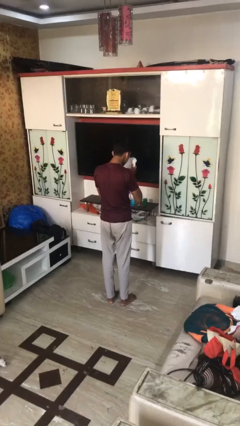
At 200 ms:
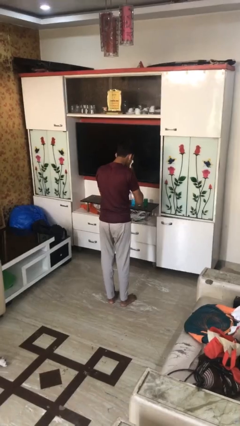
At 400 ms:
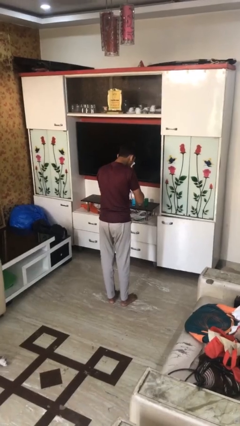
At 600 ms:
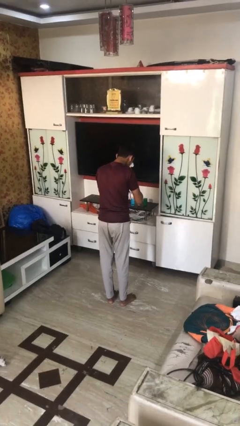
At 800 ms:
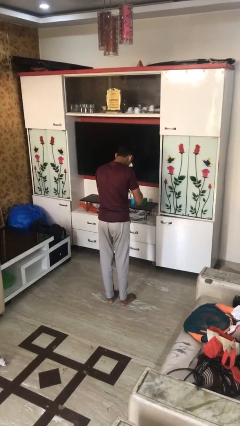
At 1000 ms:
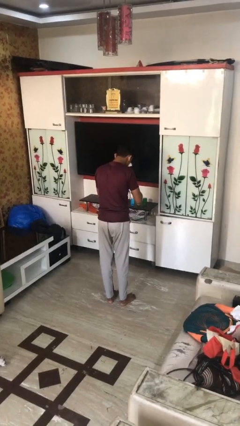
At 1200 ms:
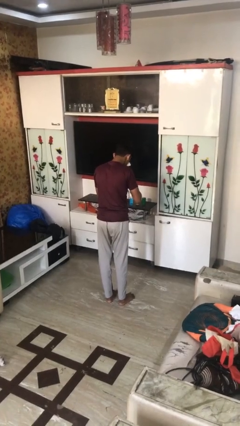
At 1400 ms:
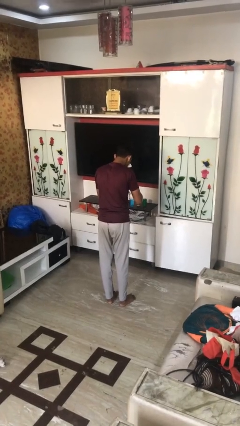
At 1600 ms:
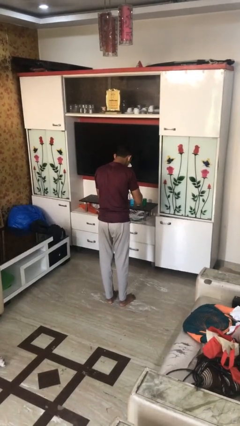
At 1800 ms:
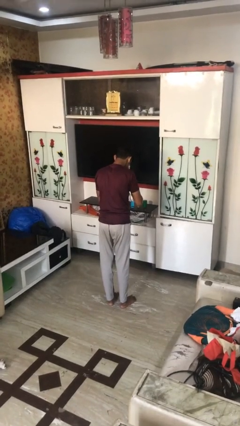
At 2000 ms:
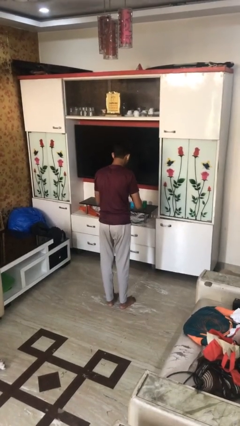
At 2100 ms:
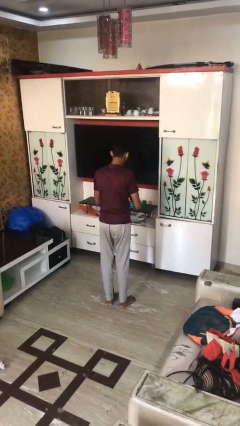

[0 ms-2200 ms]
person blows nose

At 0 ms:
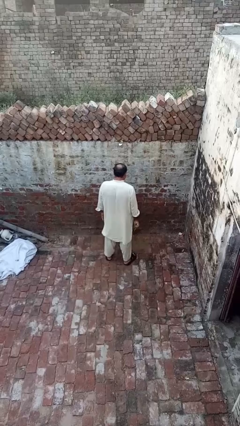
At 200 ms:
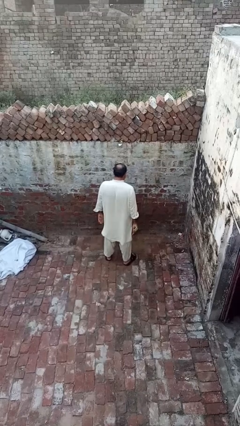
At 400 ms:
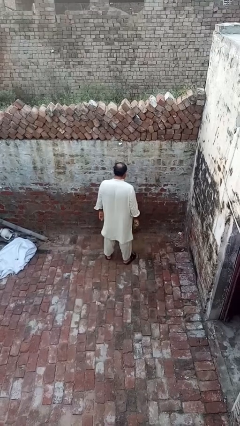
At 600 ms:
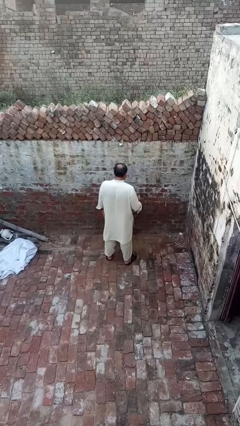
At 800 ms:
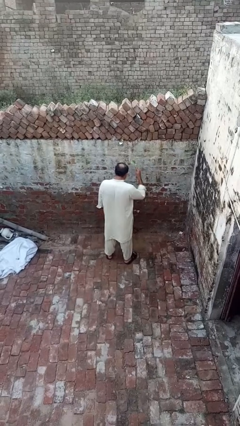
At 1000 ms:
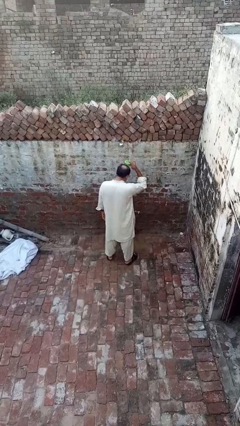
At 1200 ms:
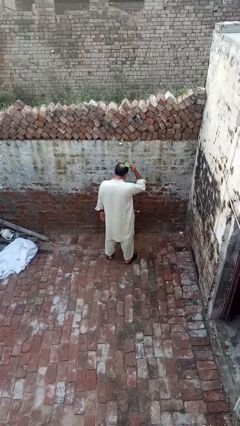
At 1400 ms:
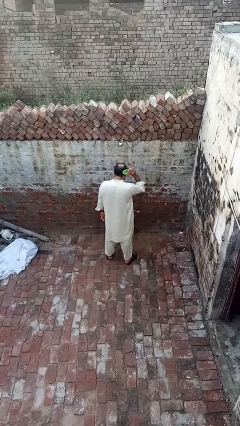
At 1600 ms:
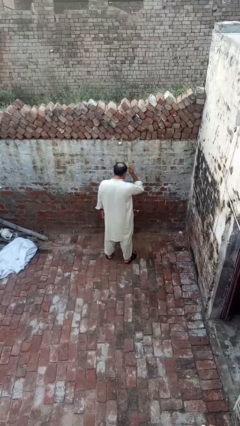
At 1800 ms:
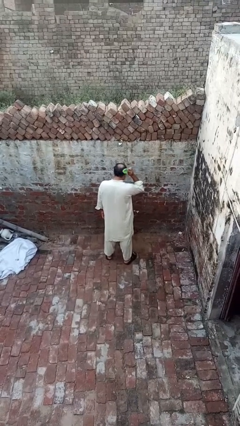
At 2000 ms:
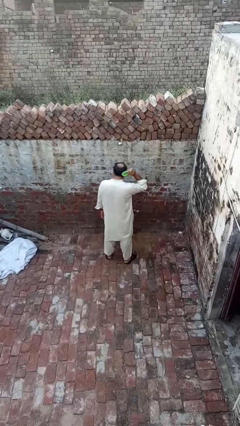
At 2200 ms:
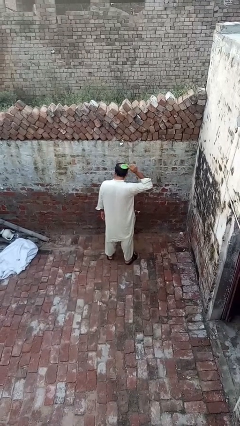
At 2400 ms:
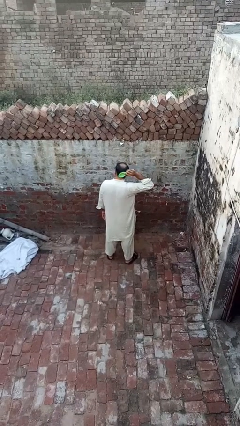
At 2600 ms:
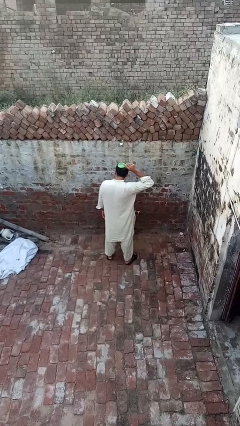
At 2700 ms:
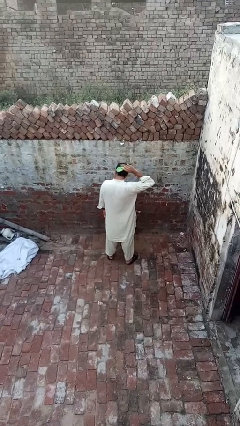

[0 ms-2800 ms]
person brushes hair

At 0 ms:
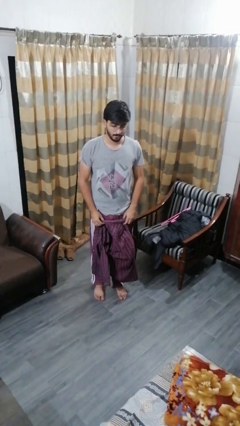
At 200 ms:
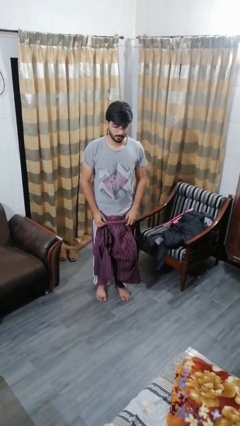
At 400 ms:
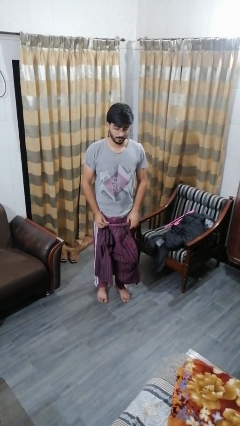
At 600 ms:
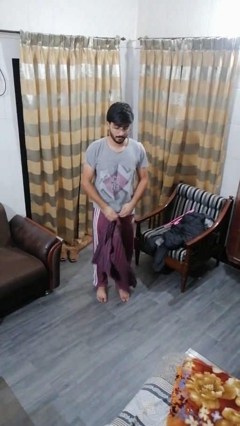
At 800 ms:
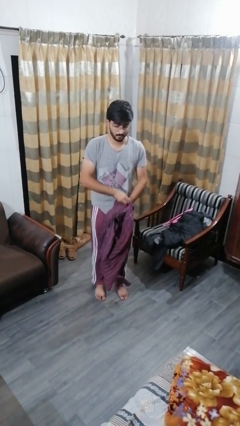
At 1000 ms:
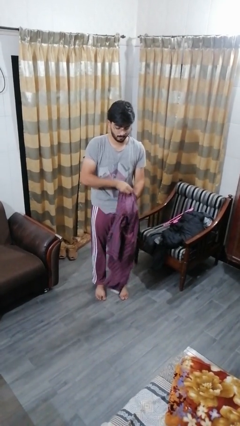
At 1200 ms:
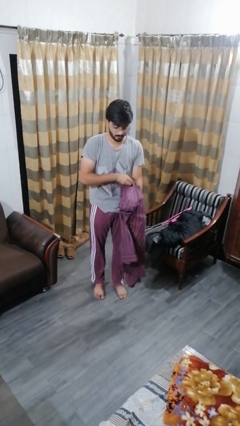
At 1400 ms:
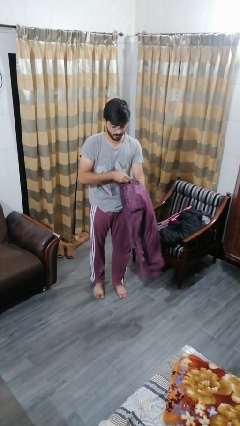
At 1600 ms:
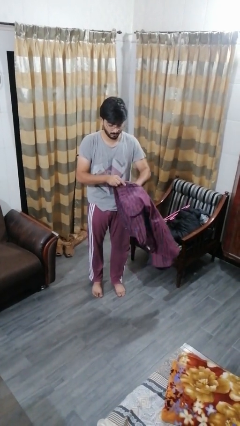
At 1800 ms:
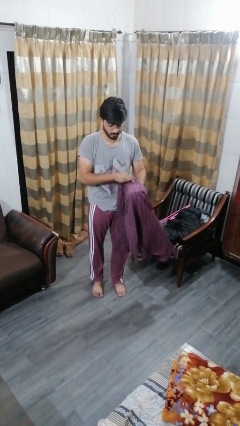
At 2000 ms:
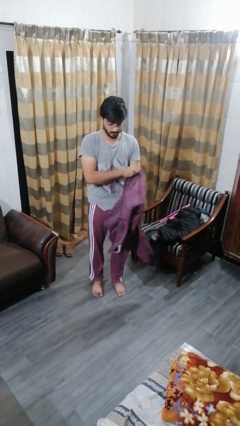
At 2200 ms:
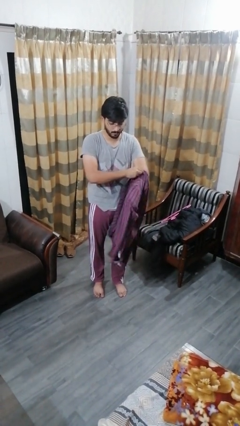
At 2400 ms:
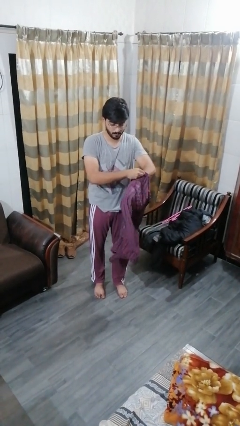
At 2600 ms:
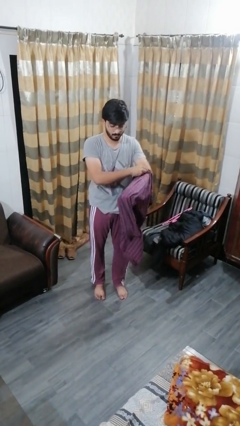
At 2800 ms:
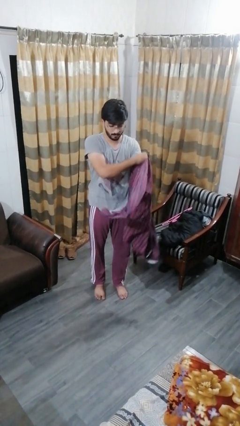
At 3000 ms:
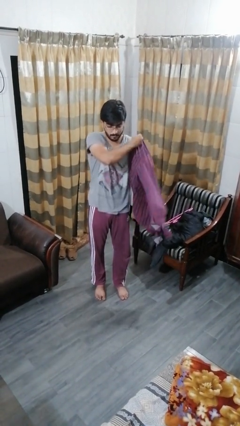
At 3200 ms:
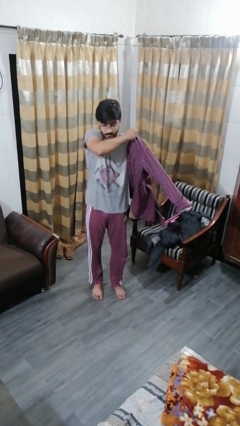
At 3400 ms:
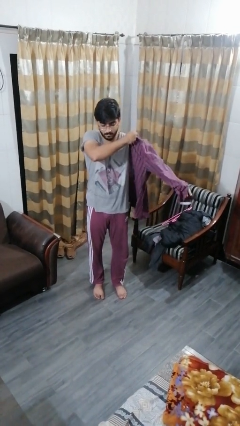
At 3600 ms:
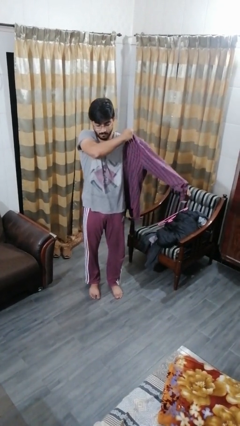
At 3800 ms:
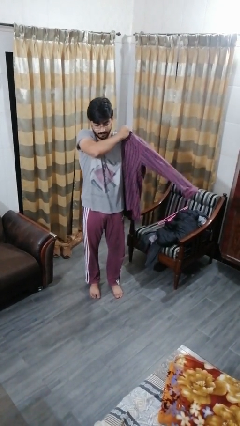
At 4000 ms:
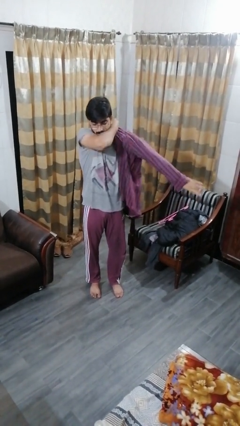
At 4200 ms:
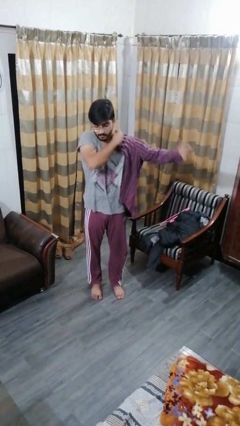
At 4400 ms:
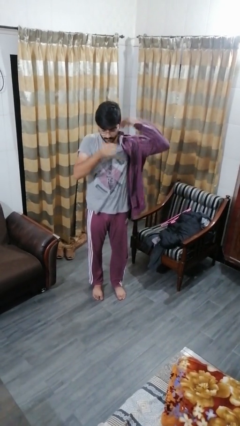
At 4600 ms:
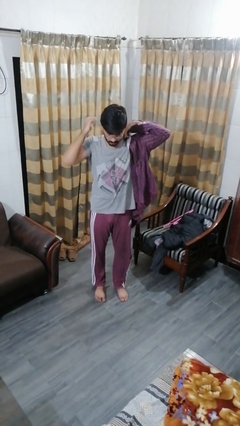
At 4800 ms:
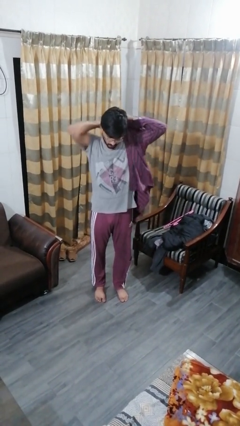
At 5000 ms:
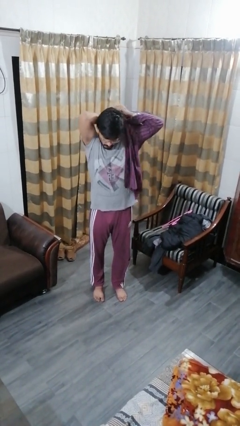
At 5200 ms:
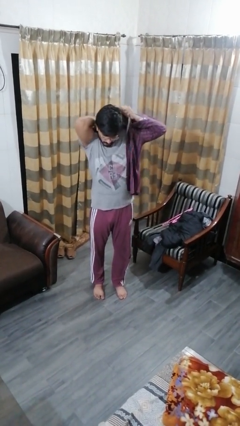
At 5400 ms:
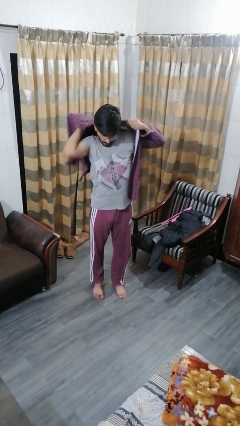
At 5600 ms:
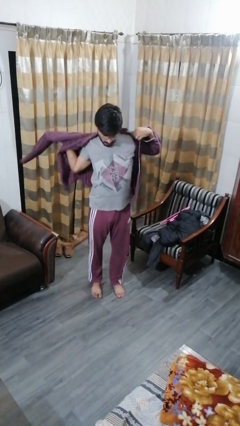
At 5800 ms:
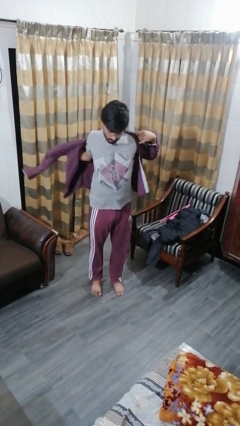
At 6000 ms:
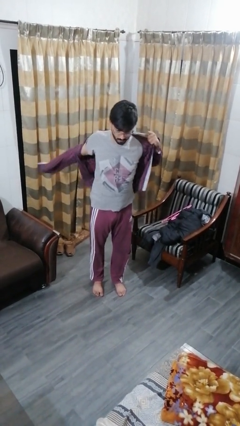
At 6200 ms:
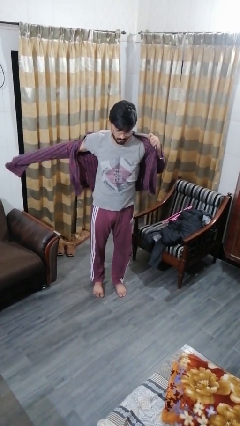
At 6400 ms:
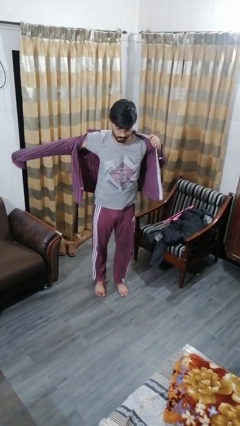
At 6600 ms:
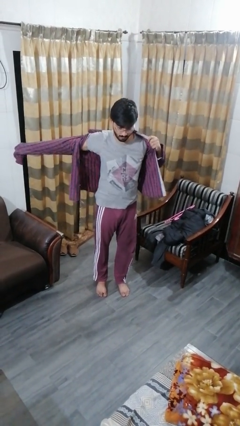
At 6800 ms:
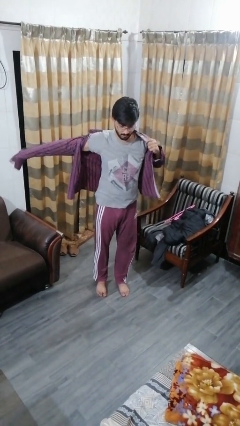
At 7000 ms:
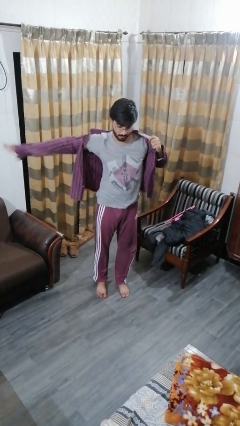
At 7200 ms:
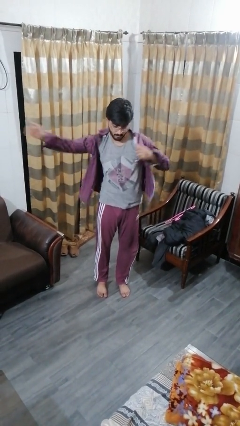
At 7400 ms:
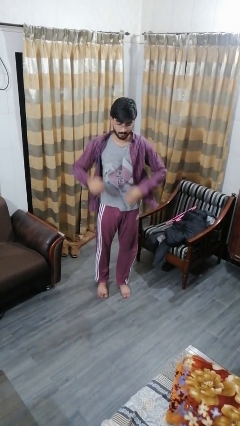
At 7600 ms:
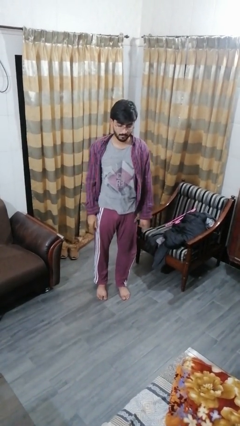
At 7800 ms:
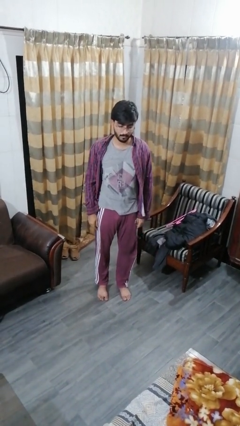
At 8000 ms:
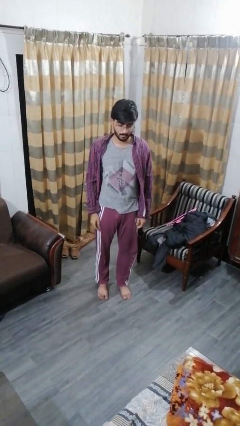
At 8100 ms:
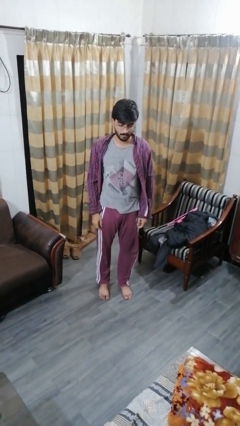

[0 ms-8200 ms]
person puts on shirt

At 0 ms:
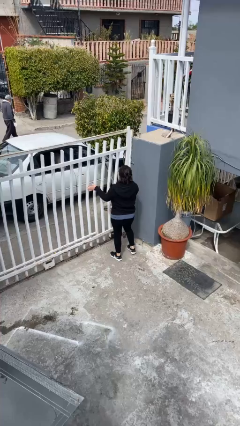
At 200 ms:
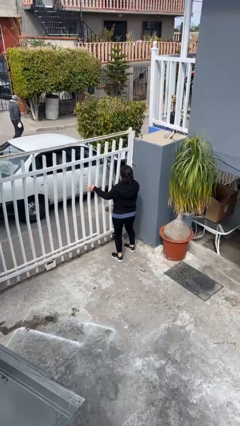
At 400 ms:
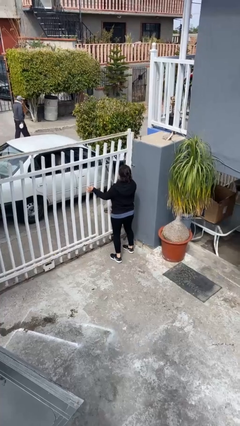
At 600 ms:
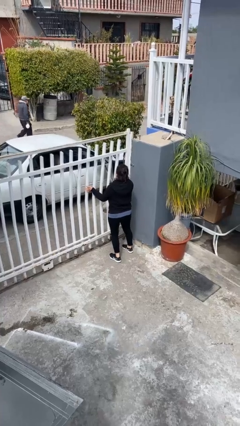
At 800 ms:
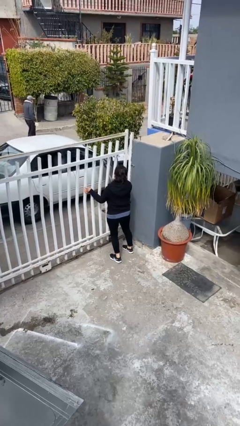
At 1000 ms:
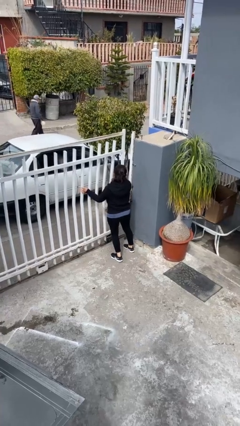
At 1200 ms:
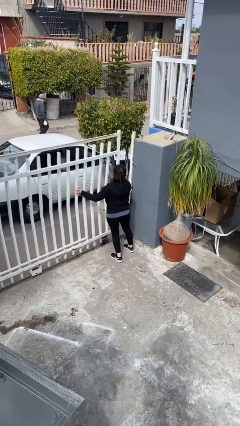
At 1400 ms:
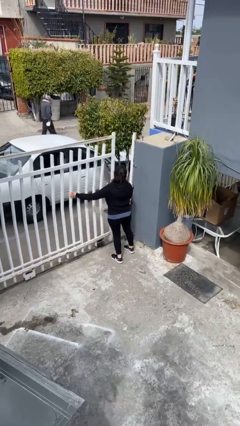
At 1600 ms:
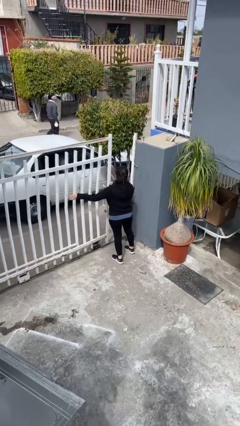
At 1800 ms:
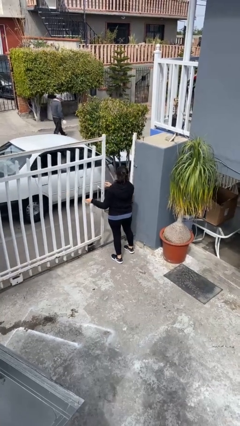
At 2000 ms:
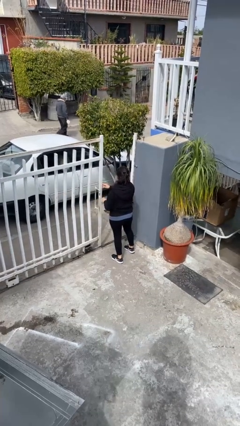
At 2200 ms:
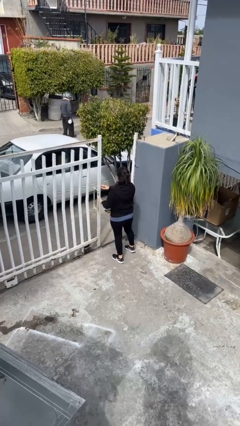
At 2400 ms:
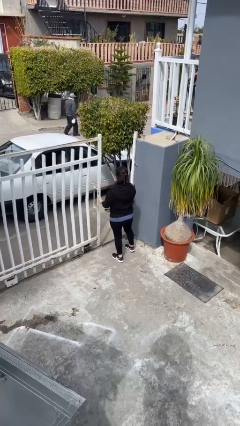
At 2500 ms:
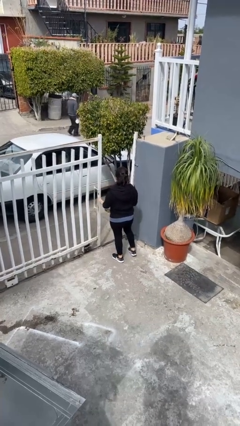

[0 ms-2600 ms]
person opens facility door

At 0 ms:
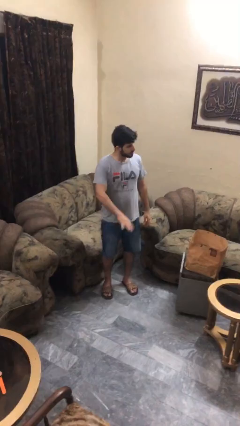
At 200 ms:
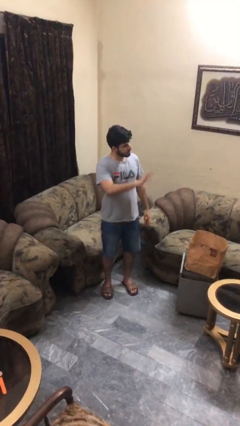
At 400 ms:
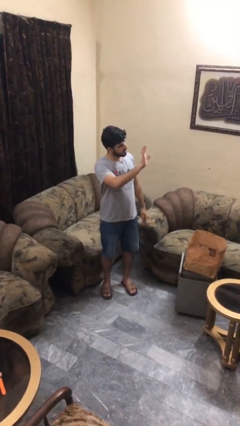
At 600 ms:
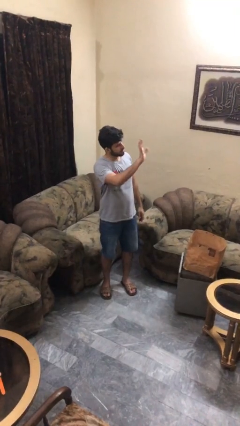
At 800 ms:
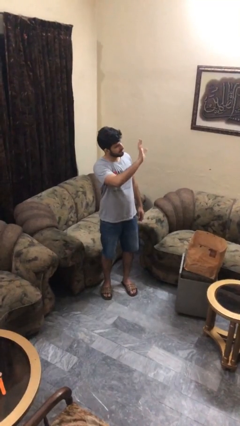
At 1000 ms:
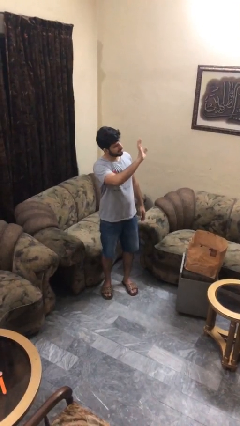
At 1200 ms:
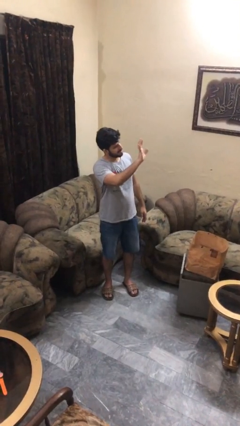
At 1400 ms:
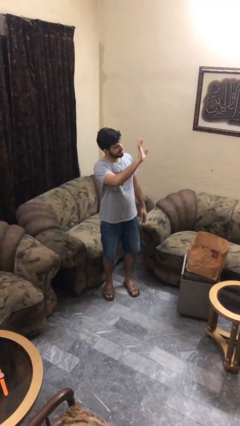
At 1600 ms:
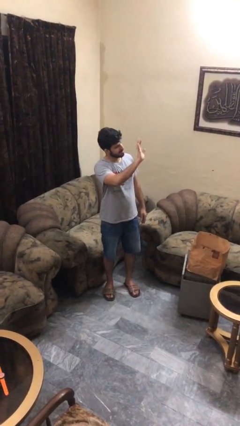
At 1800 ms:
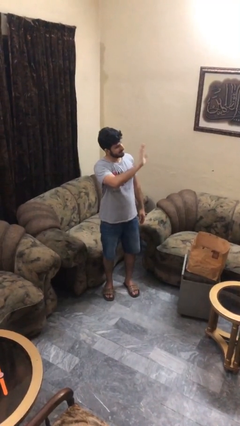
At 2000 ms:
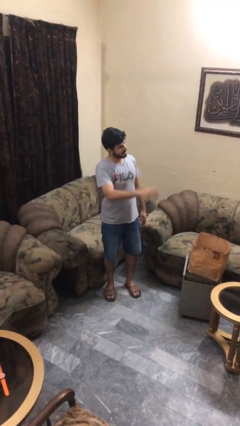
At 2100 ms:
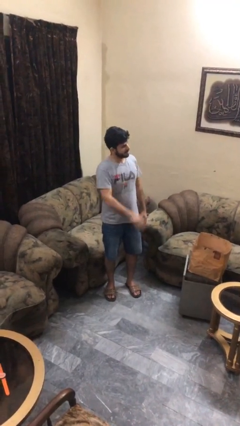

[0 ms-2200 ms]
person waves at person
